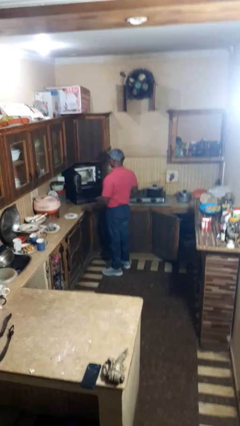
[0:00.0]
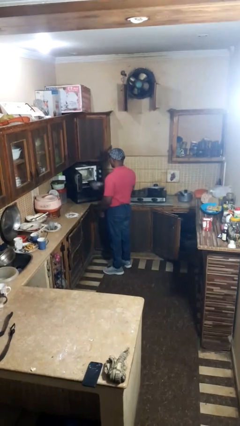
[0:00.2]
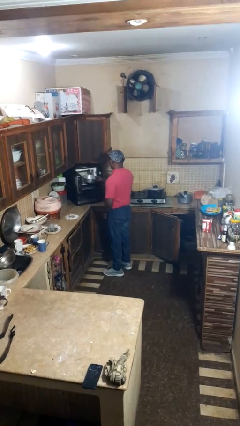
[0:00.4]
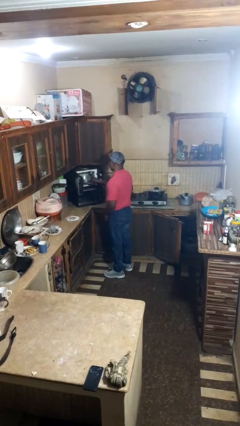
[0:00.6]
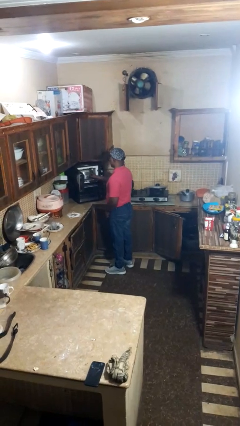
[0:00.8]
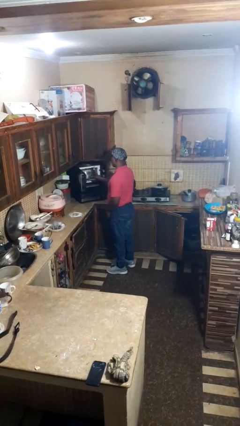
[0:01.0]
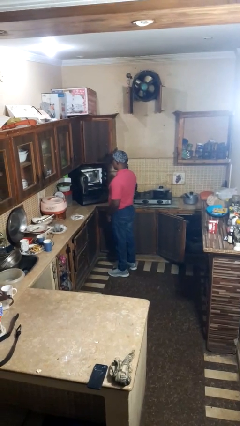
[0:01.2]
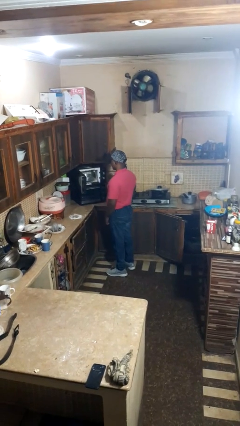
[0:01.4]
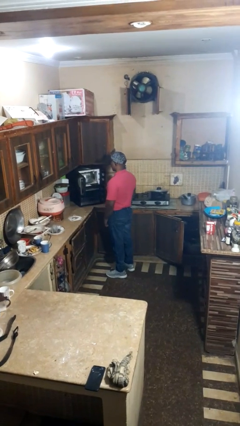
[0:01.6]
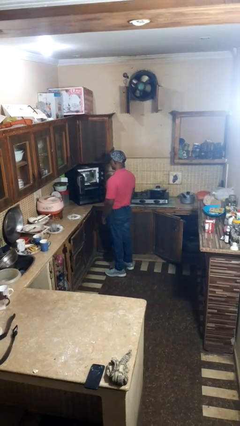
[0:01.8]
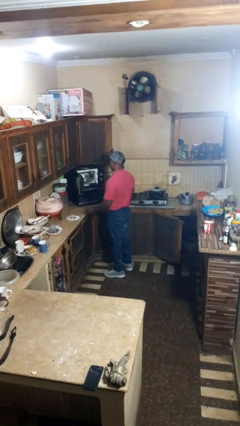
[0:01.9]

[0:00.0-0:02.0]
person puts object into microwave

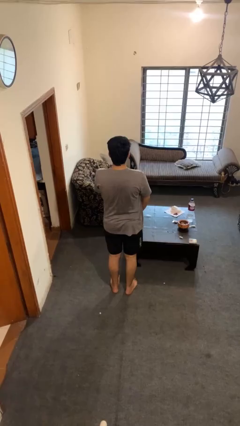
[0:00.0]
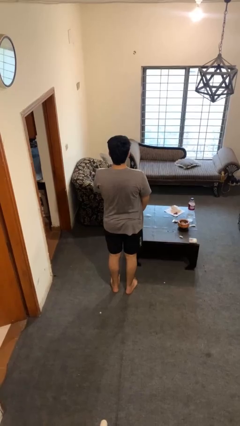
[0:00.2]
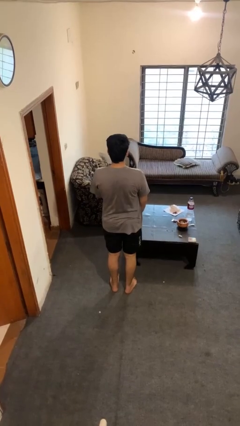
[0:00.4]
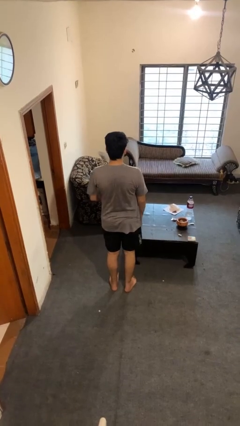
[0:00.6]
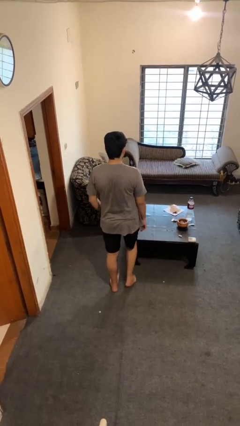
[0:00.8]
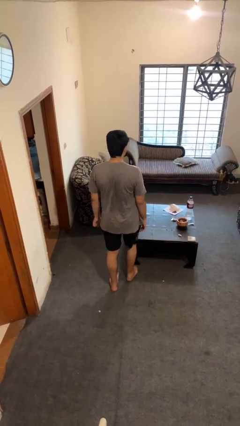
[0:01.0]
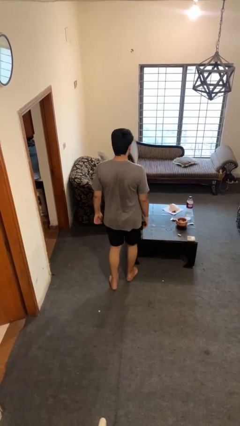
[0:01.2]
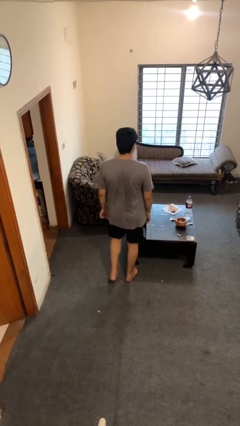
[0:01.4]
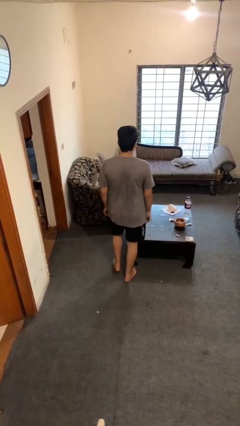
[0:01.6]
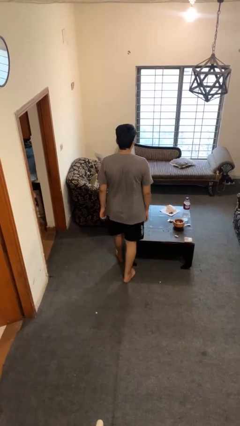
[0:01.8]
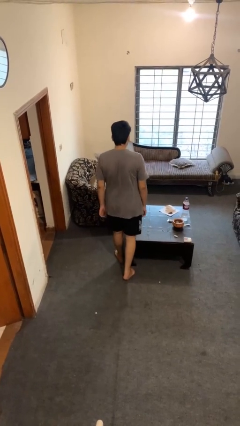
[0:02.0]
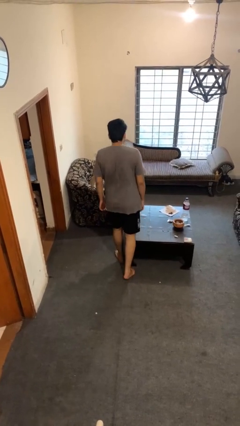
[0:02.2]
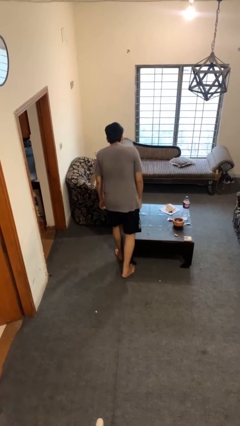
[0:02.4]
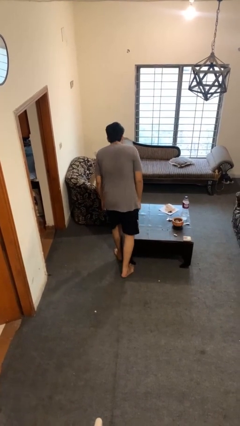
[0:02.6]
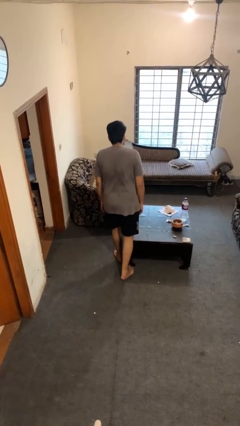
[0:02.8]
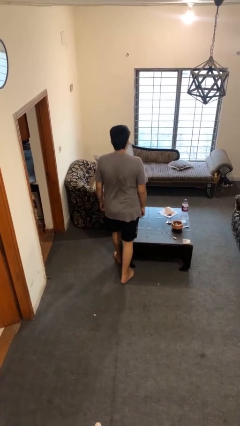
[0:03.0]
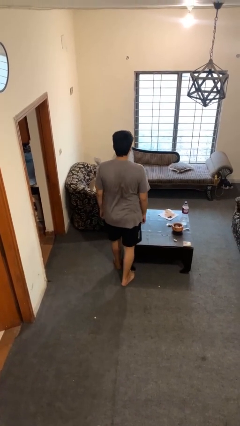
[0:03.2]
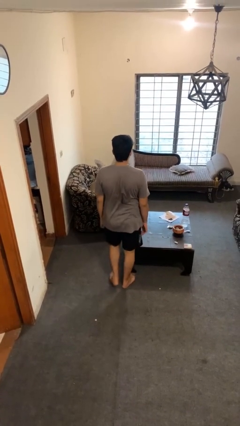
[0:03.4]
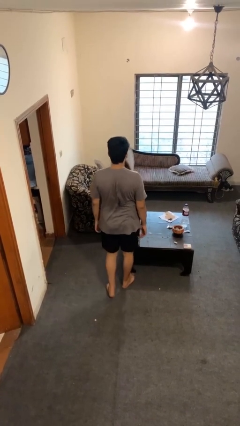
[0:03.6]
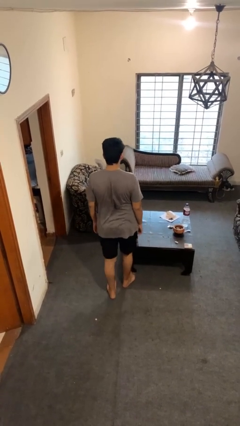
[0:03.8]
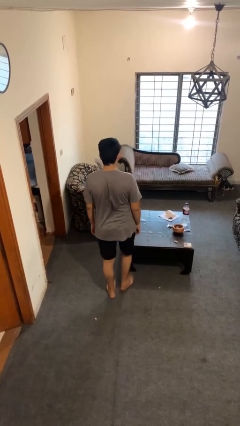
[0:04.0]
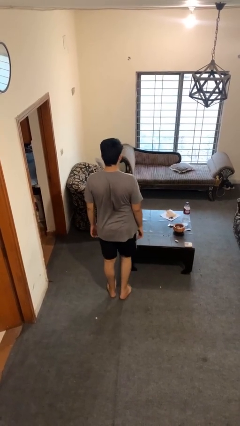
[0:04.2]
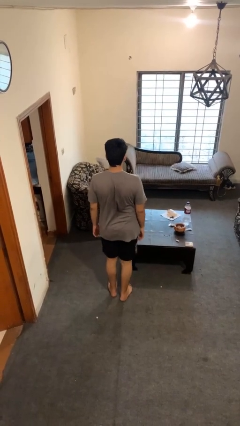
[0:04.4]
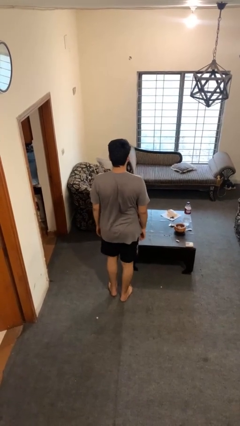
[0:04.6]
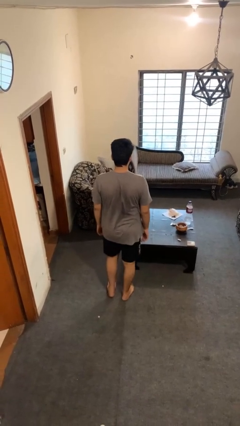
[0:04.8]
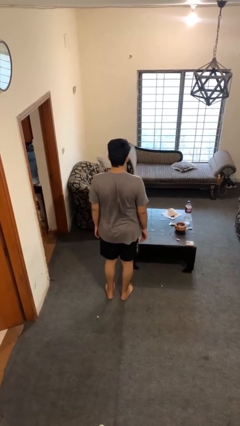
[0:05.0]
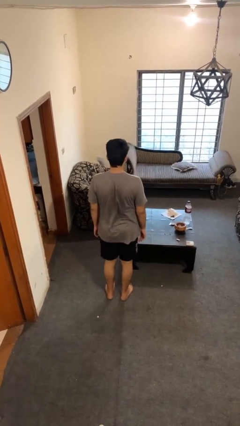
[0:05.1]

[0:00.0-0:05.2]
person bumps into table

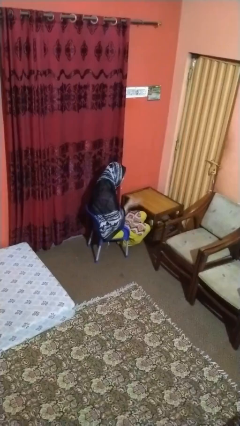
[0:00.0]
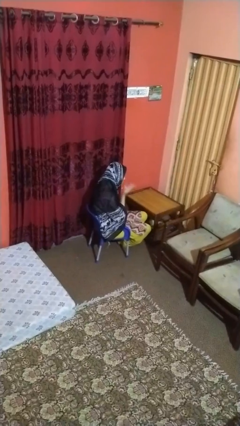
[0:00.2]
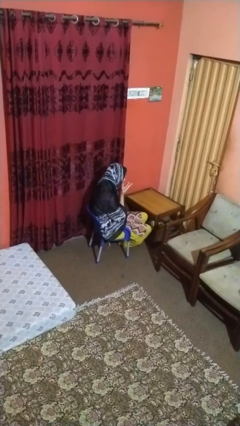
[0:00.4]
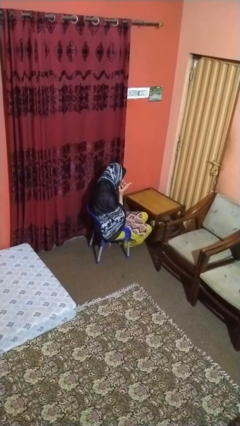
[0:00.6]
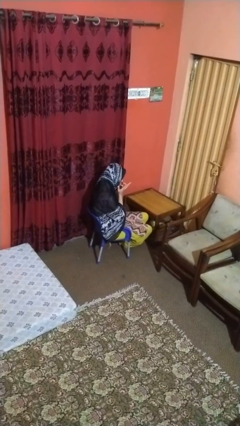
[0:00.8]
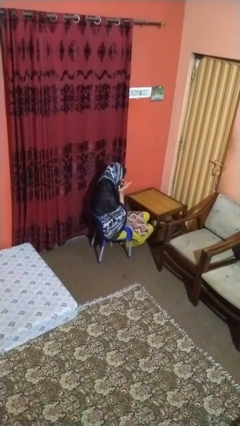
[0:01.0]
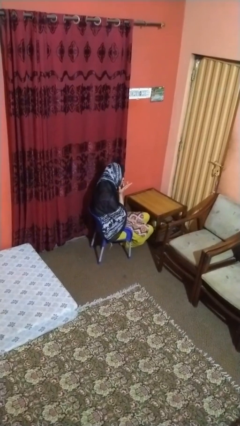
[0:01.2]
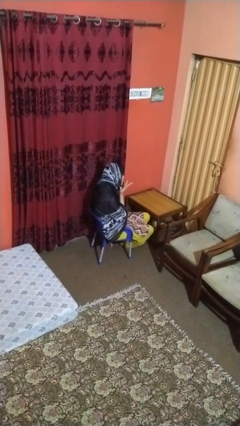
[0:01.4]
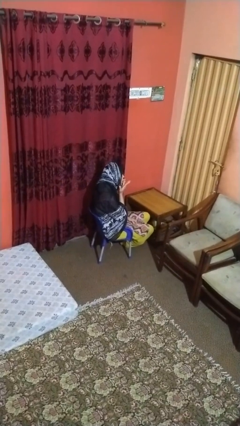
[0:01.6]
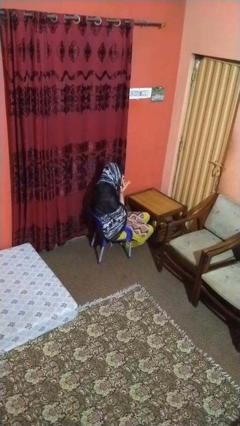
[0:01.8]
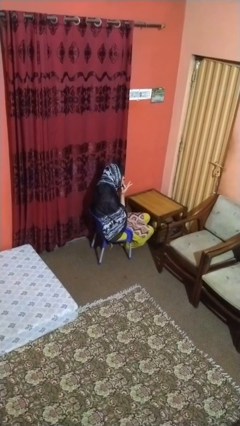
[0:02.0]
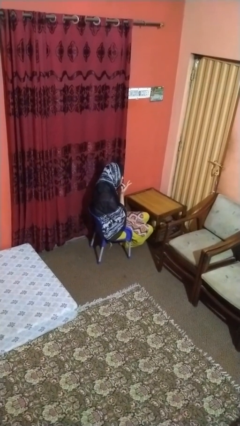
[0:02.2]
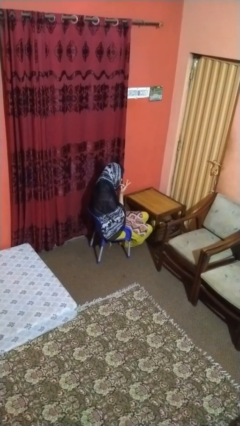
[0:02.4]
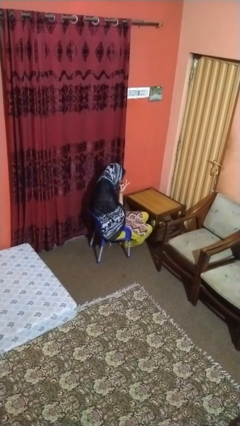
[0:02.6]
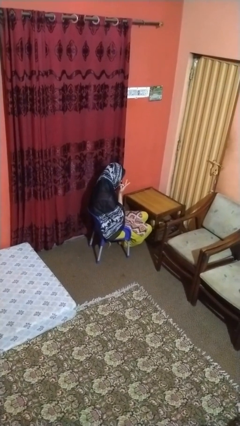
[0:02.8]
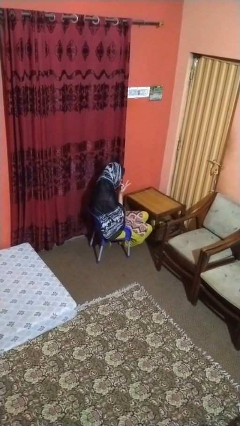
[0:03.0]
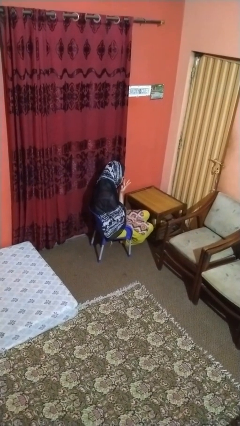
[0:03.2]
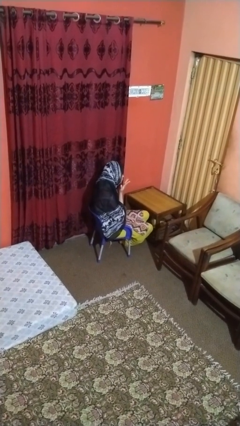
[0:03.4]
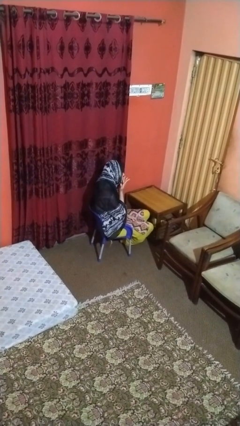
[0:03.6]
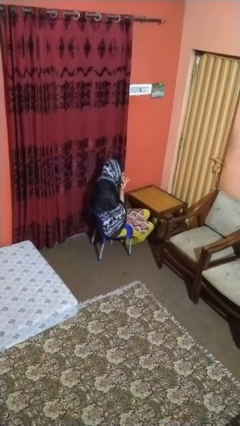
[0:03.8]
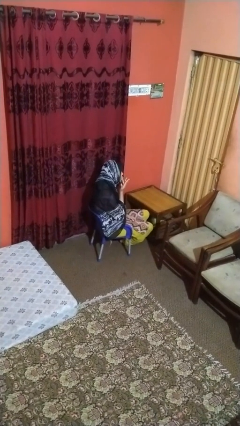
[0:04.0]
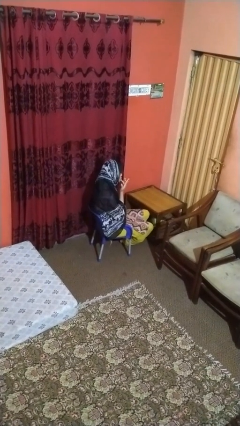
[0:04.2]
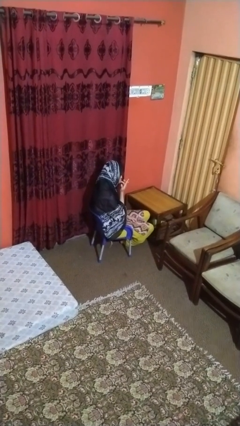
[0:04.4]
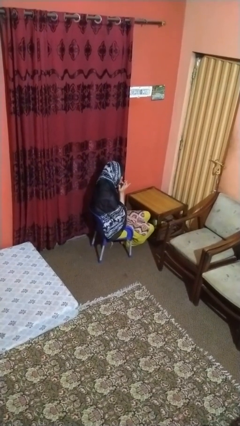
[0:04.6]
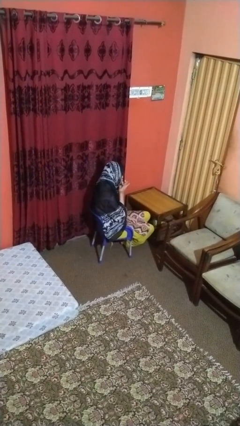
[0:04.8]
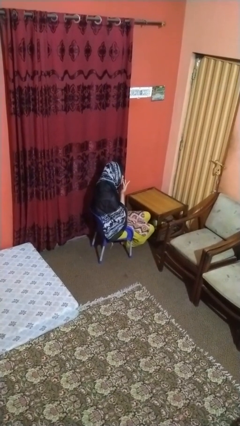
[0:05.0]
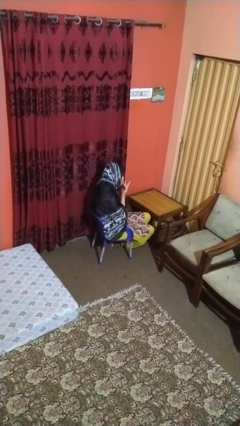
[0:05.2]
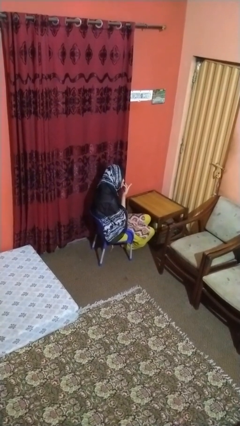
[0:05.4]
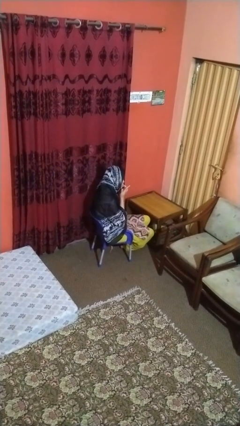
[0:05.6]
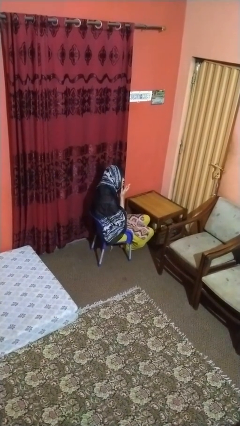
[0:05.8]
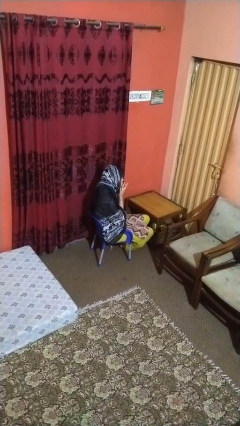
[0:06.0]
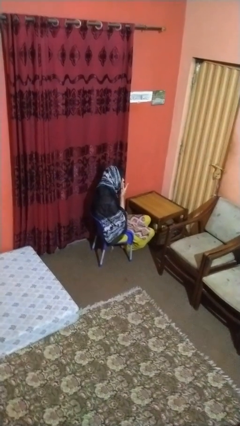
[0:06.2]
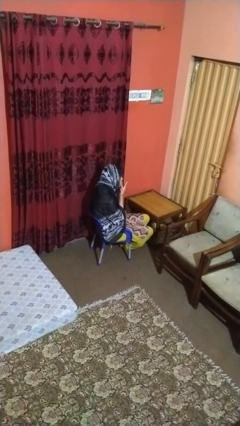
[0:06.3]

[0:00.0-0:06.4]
person licks fingers

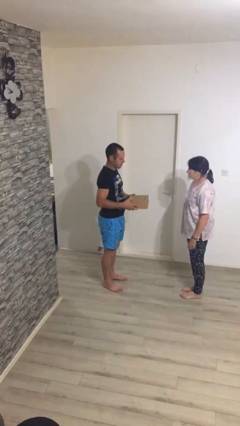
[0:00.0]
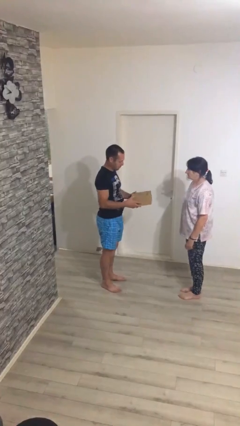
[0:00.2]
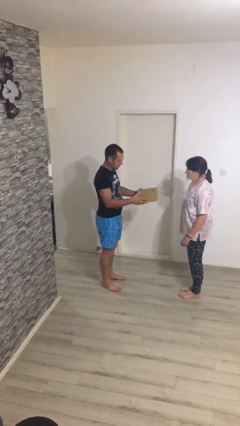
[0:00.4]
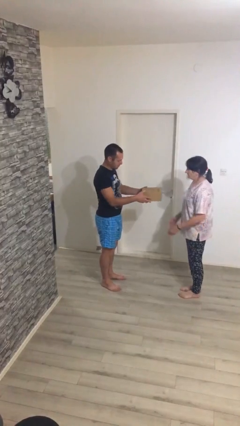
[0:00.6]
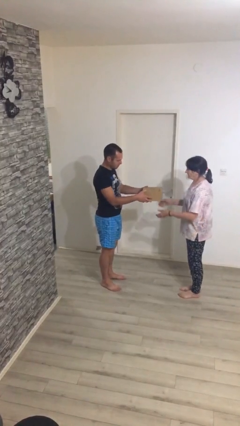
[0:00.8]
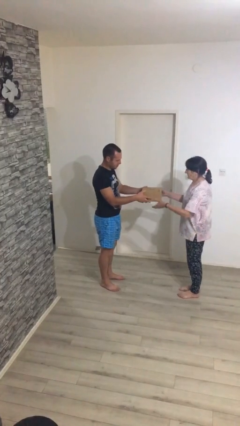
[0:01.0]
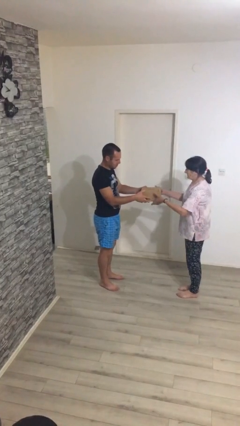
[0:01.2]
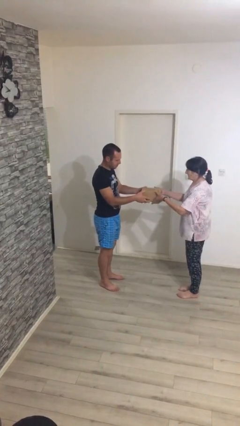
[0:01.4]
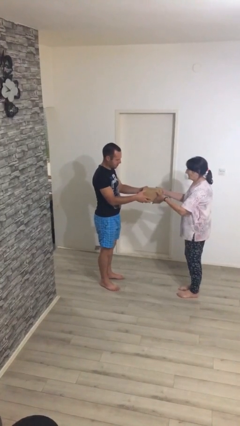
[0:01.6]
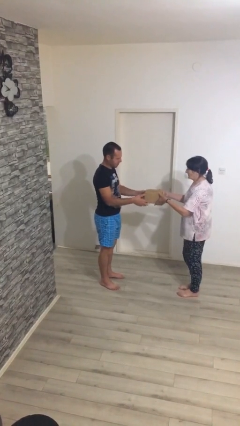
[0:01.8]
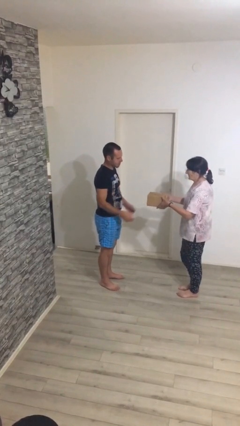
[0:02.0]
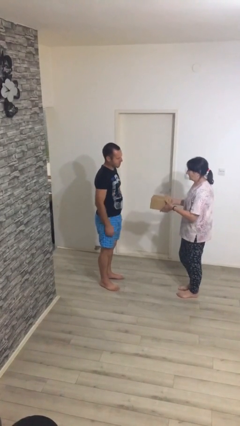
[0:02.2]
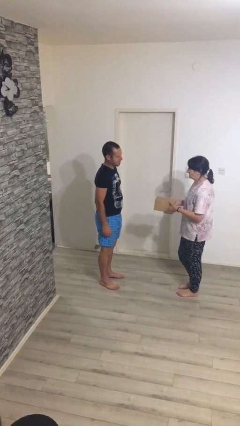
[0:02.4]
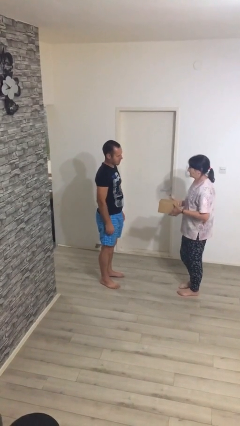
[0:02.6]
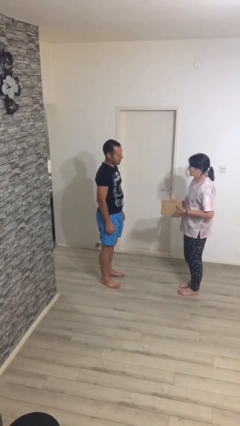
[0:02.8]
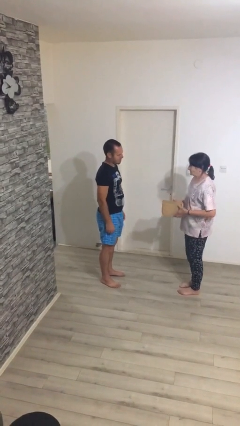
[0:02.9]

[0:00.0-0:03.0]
person transfers object to person

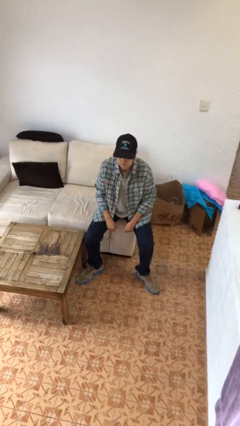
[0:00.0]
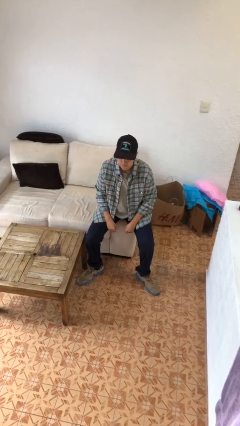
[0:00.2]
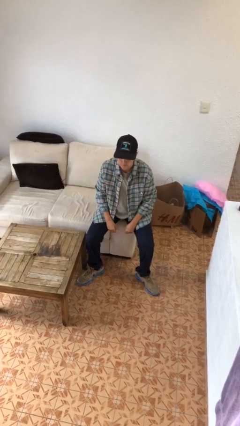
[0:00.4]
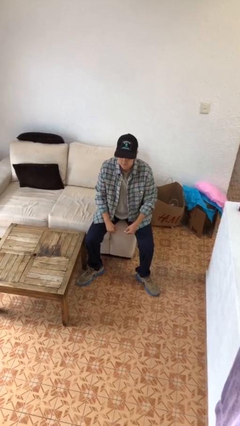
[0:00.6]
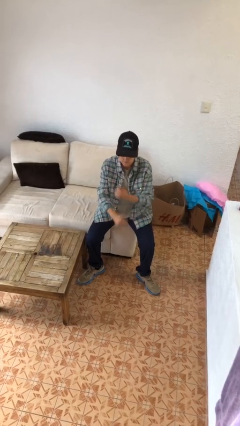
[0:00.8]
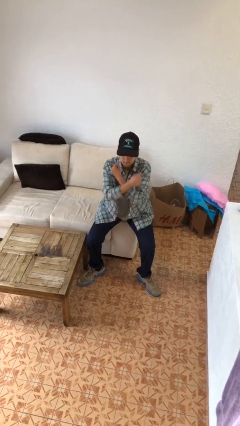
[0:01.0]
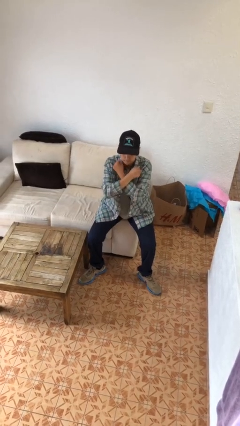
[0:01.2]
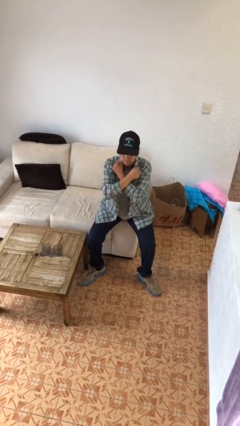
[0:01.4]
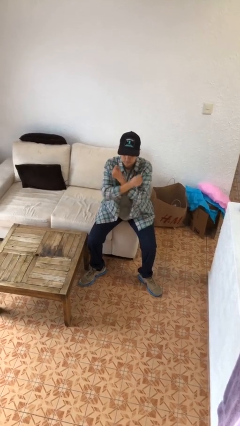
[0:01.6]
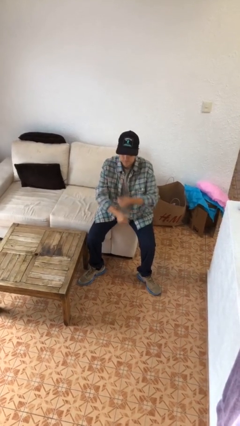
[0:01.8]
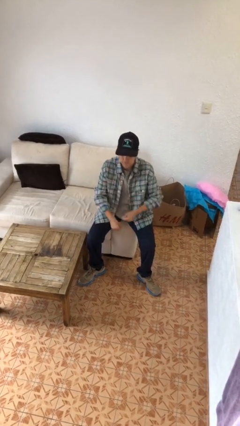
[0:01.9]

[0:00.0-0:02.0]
person gestures arms x
